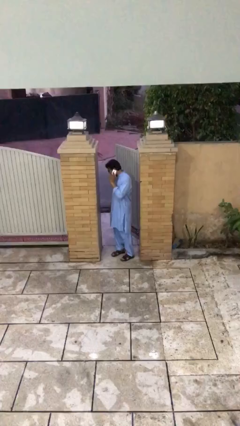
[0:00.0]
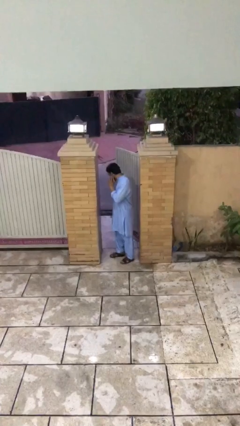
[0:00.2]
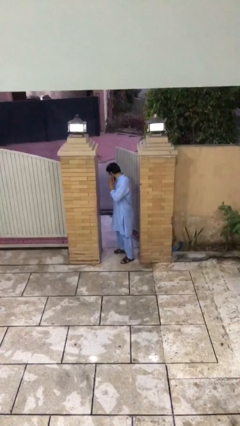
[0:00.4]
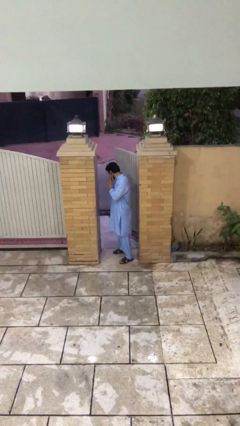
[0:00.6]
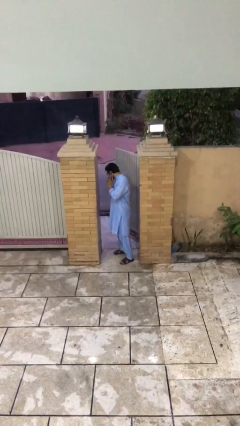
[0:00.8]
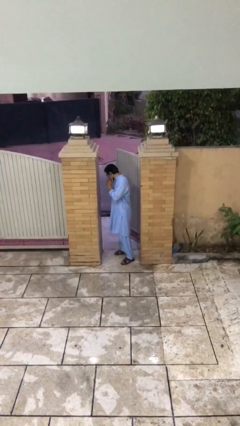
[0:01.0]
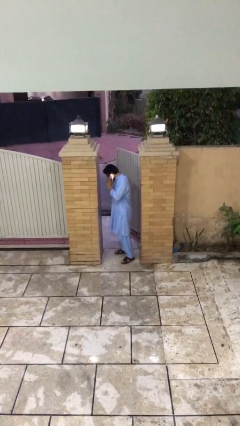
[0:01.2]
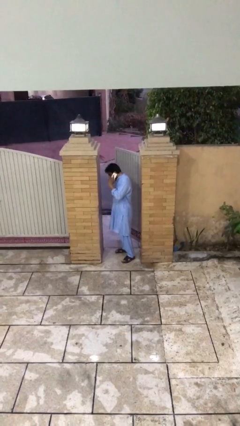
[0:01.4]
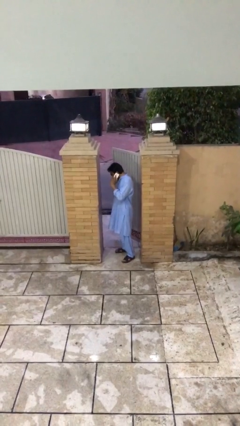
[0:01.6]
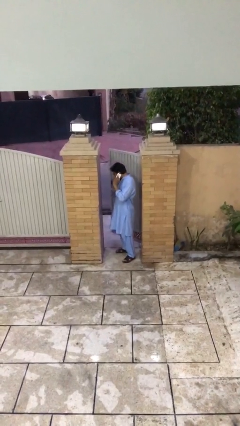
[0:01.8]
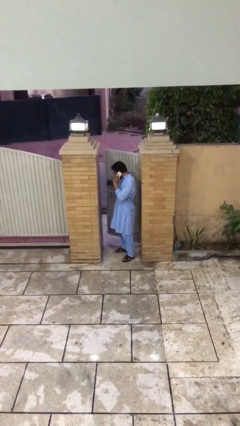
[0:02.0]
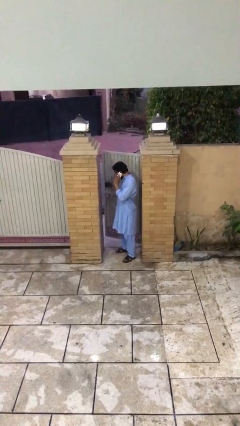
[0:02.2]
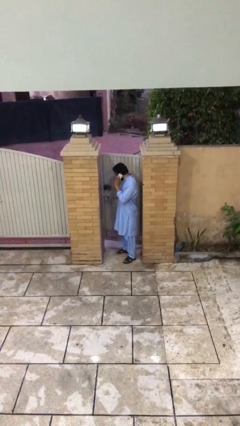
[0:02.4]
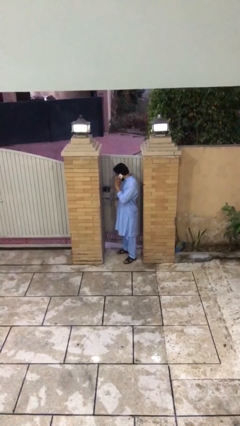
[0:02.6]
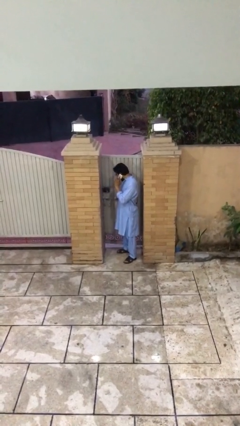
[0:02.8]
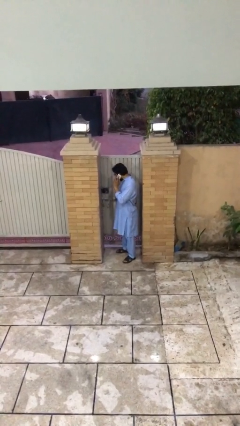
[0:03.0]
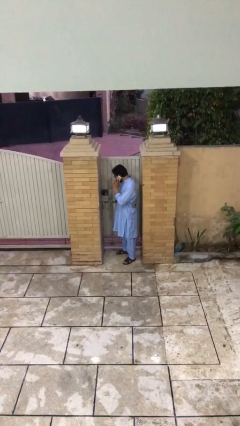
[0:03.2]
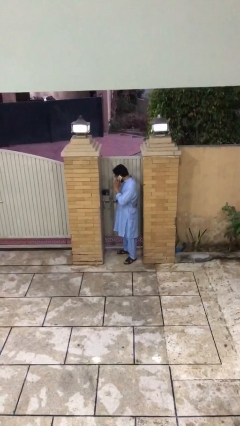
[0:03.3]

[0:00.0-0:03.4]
person closes facility door

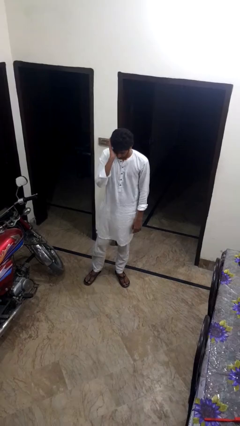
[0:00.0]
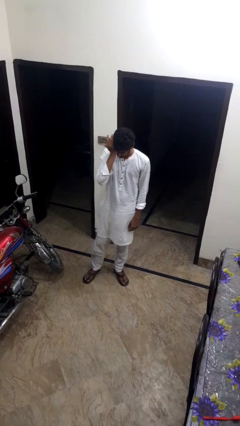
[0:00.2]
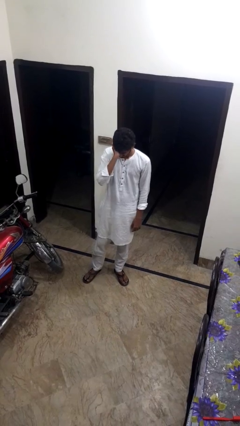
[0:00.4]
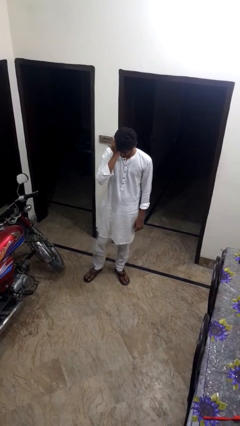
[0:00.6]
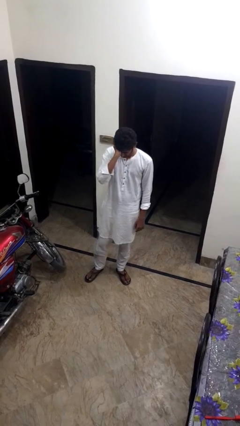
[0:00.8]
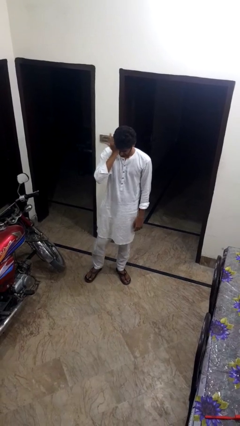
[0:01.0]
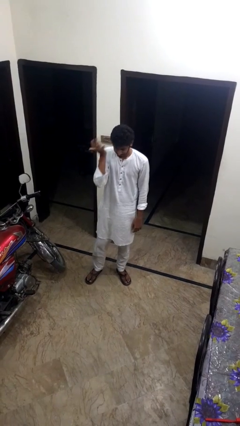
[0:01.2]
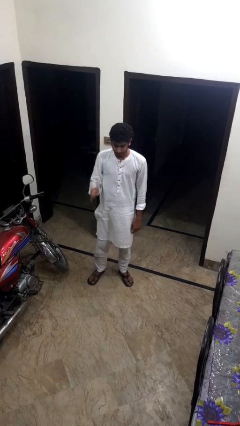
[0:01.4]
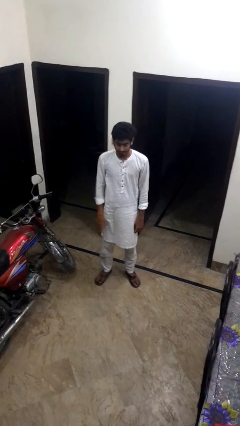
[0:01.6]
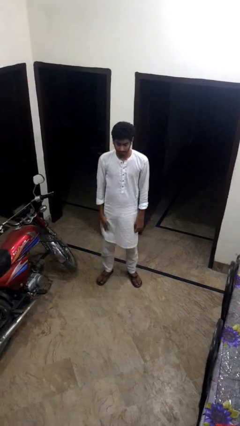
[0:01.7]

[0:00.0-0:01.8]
person rubs eyes

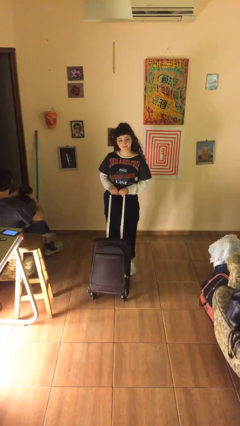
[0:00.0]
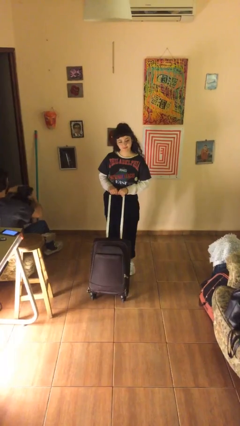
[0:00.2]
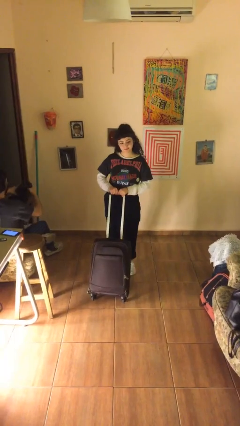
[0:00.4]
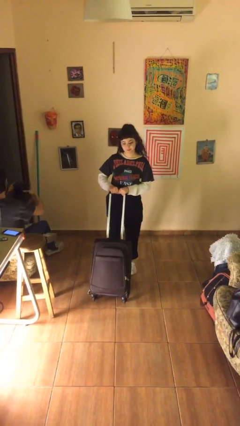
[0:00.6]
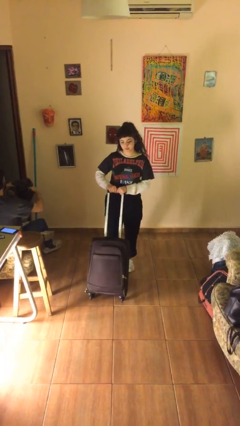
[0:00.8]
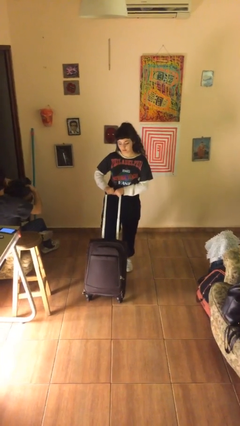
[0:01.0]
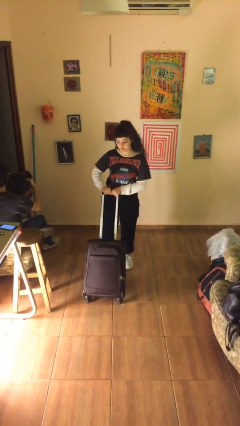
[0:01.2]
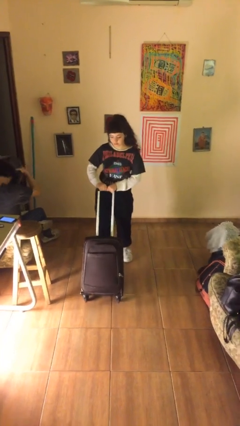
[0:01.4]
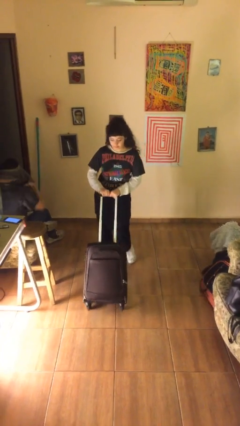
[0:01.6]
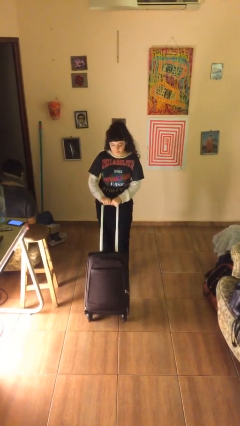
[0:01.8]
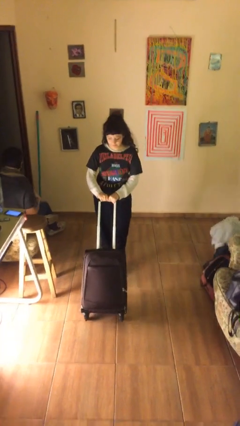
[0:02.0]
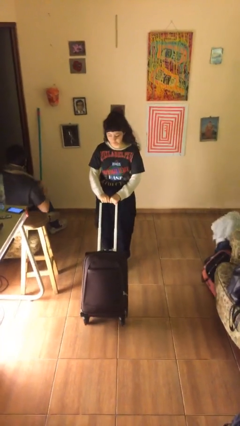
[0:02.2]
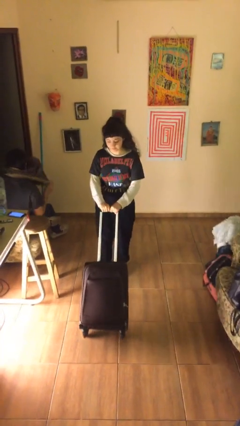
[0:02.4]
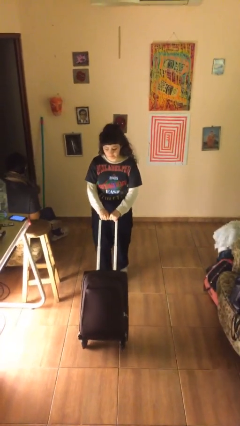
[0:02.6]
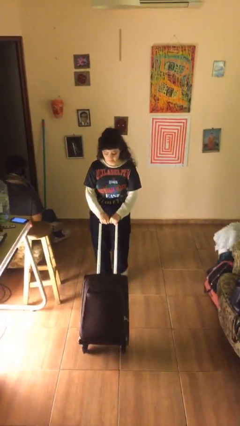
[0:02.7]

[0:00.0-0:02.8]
person pushes wheeled cart

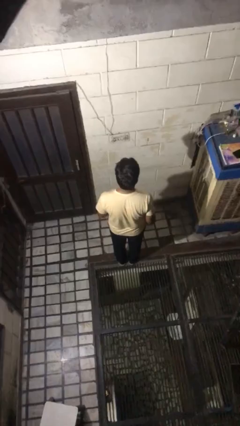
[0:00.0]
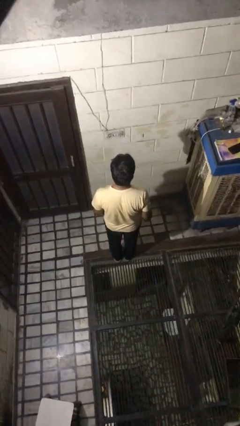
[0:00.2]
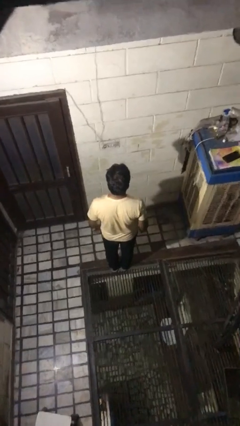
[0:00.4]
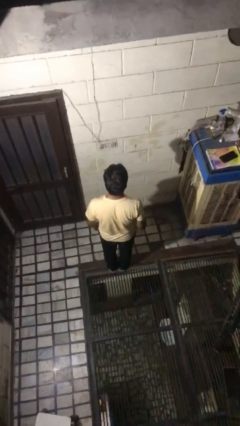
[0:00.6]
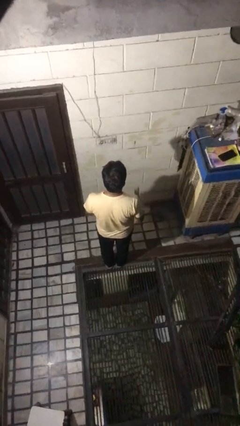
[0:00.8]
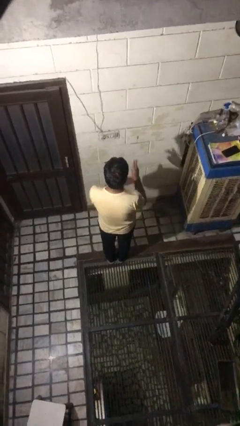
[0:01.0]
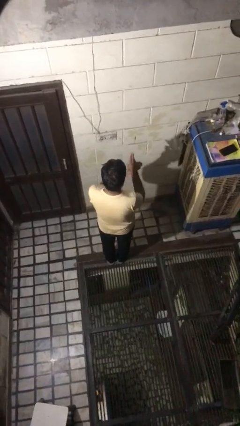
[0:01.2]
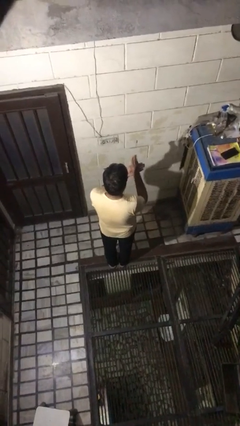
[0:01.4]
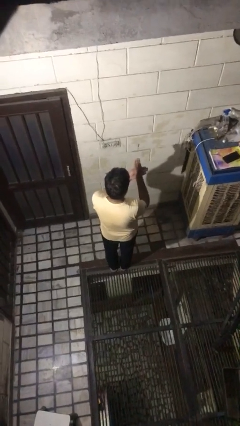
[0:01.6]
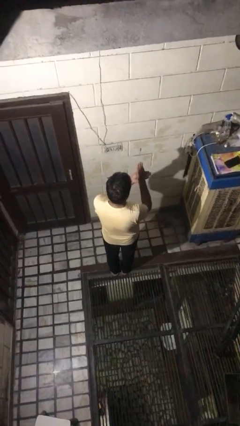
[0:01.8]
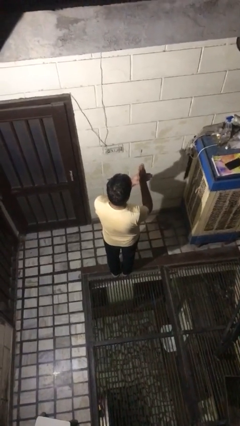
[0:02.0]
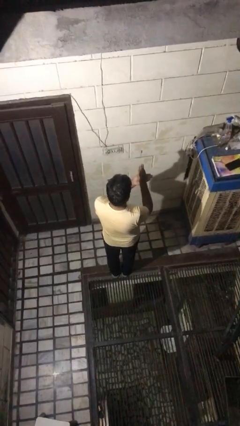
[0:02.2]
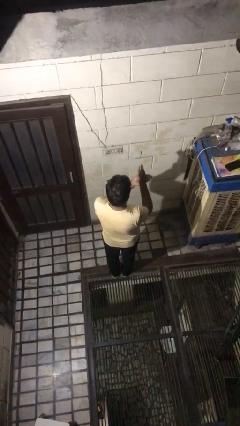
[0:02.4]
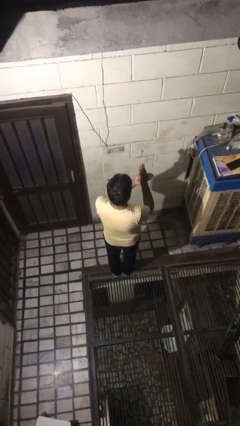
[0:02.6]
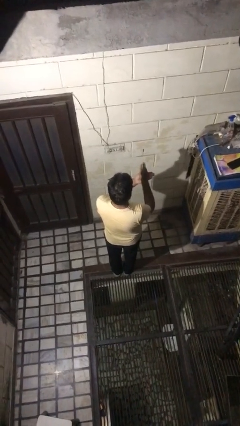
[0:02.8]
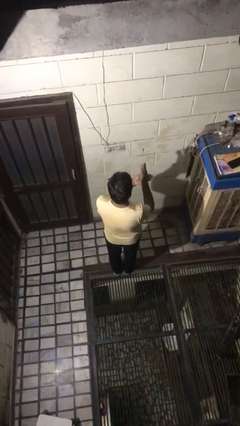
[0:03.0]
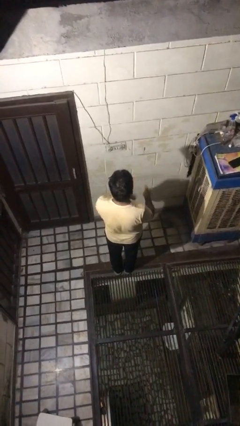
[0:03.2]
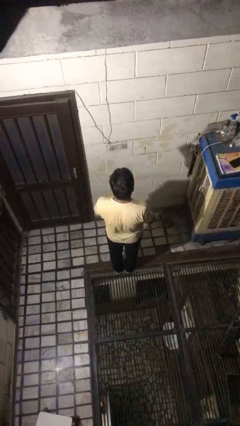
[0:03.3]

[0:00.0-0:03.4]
person gestures number three

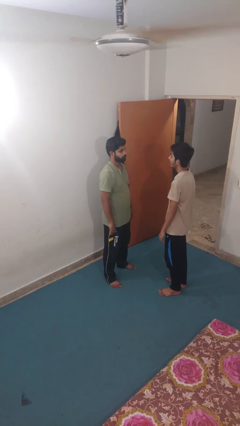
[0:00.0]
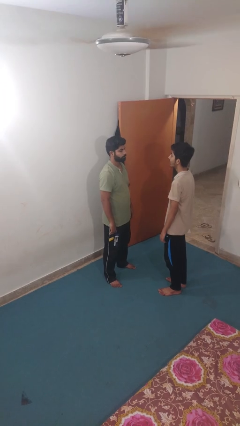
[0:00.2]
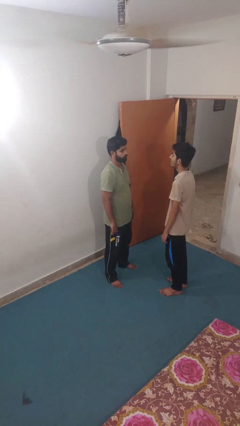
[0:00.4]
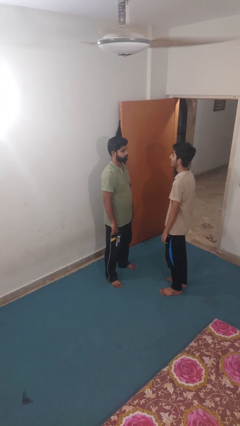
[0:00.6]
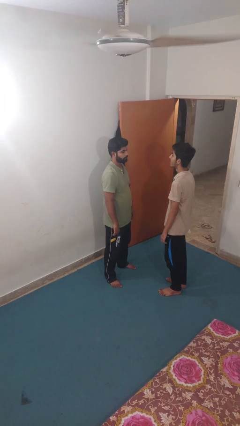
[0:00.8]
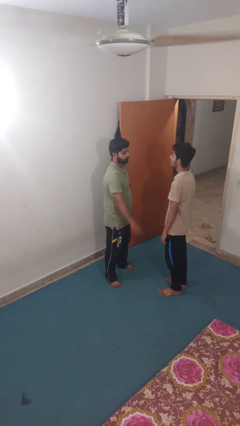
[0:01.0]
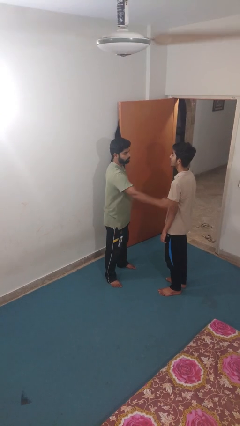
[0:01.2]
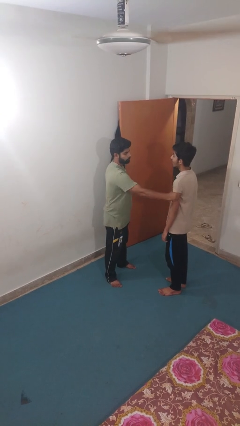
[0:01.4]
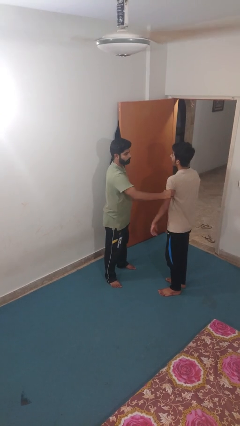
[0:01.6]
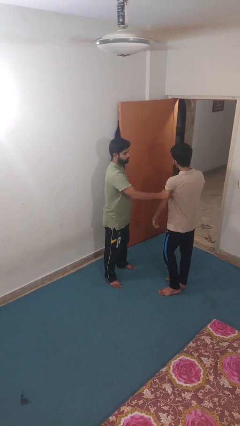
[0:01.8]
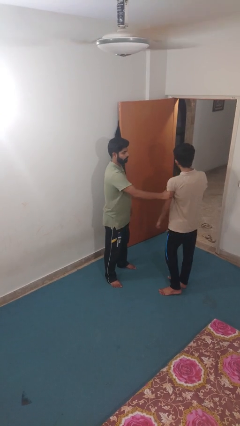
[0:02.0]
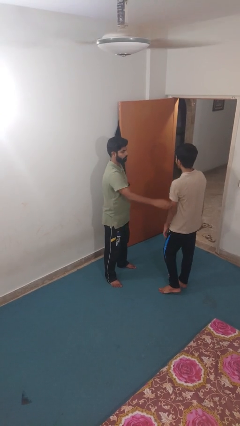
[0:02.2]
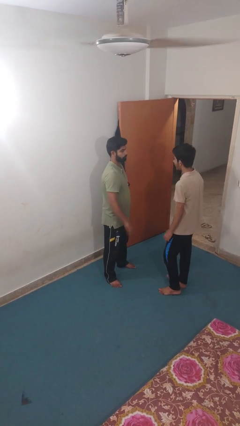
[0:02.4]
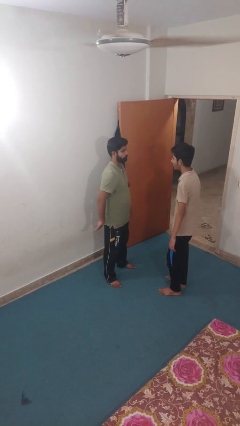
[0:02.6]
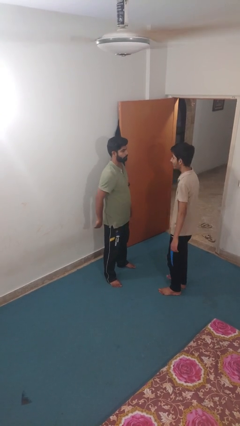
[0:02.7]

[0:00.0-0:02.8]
person grabs person by bicep

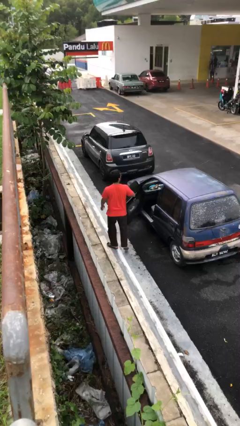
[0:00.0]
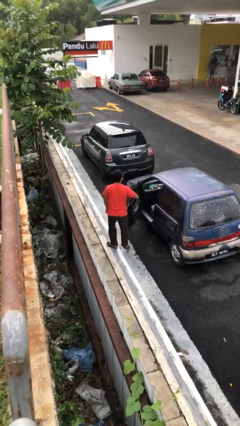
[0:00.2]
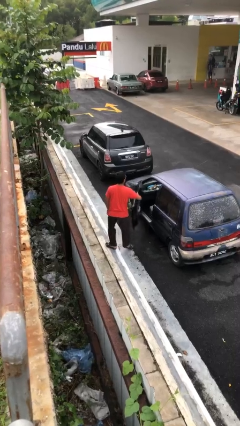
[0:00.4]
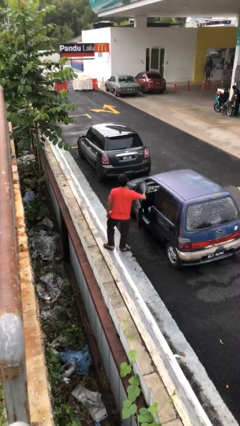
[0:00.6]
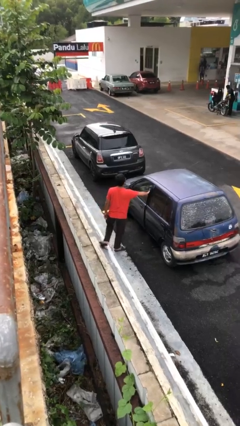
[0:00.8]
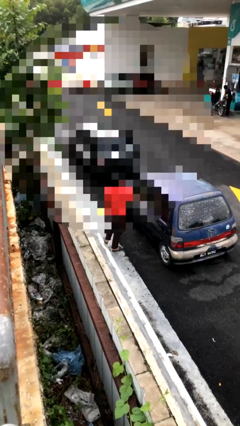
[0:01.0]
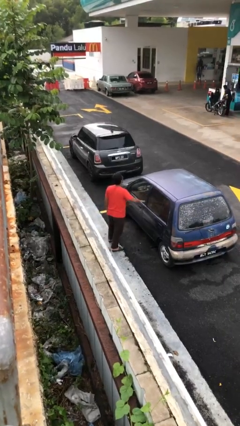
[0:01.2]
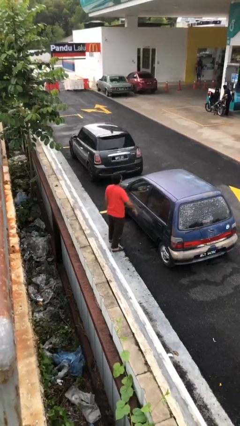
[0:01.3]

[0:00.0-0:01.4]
person closes car door

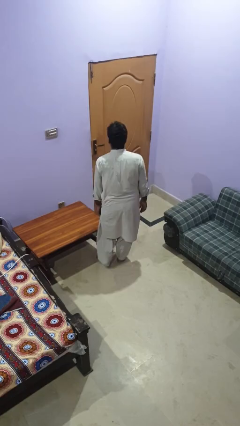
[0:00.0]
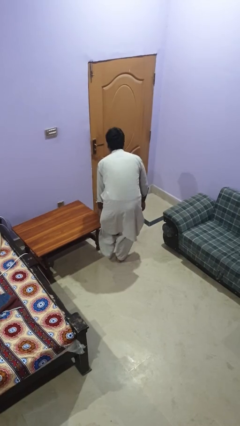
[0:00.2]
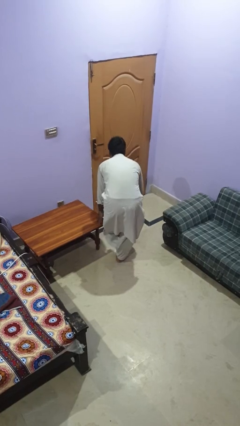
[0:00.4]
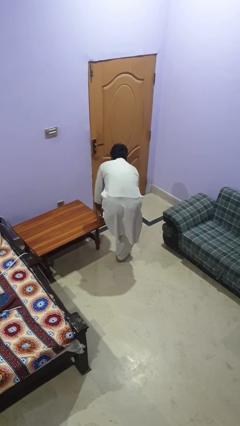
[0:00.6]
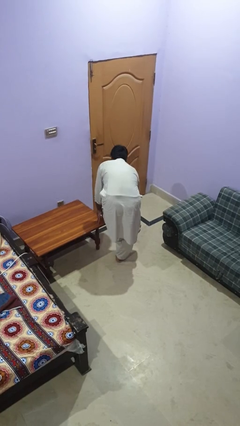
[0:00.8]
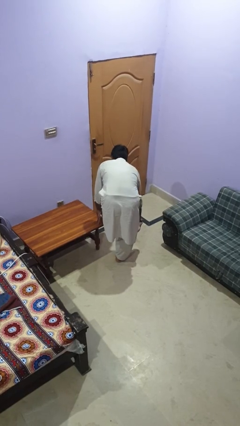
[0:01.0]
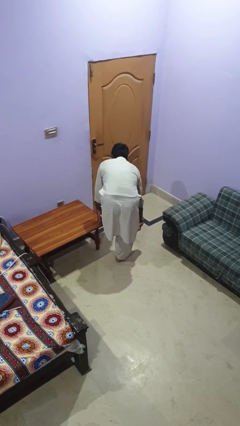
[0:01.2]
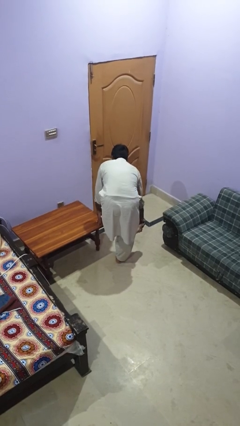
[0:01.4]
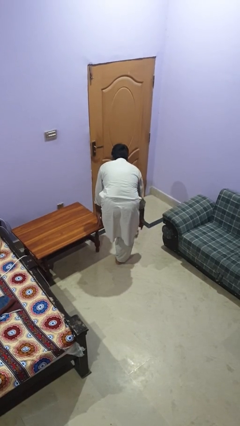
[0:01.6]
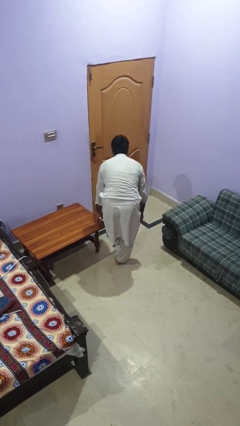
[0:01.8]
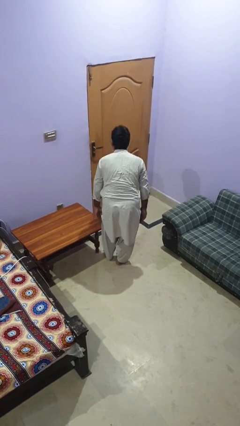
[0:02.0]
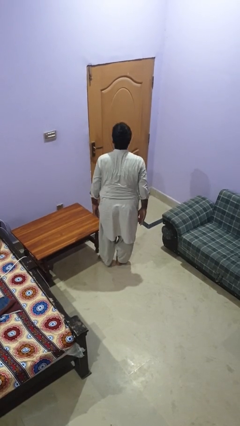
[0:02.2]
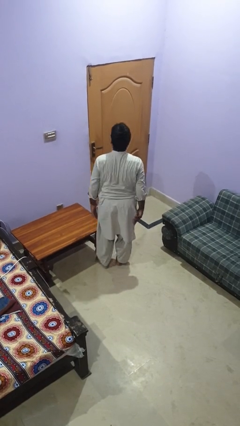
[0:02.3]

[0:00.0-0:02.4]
person bumps into table
